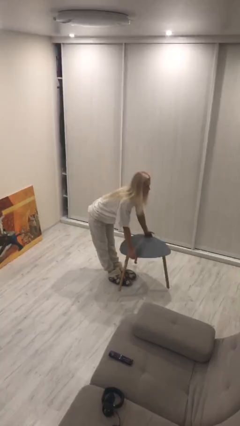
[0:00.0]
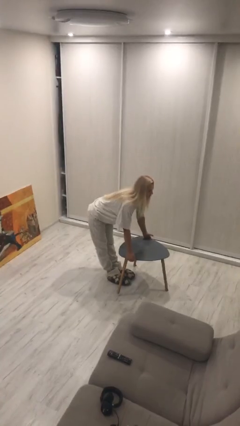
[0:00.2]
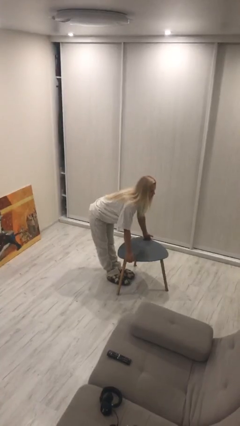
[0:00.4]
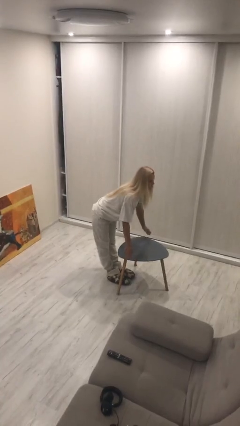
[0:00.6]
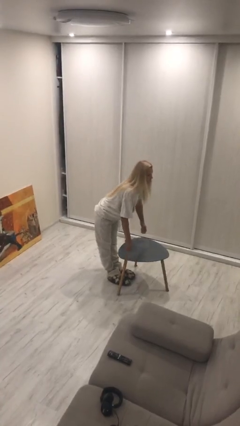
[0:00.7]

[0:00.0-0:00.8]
person puts down object on floor

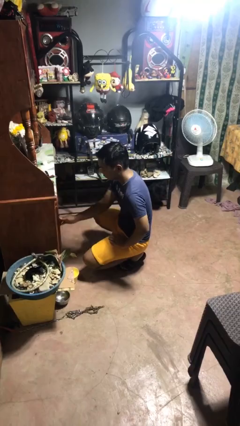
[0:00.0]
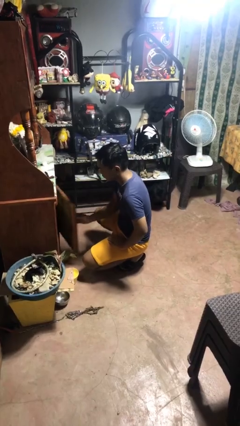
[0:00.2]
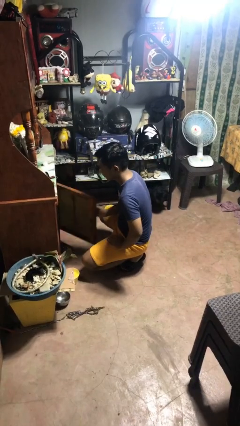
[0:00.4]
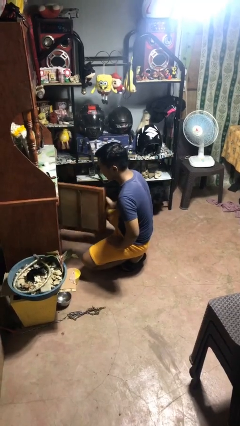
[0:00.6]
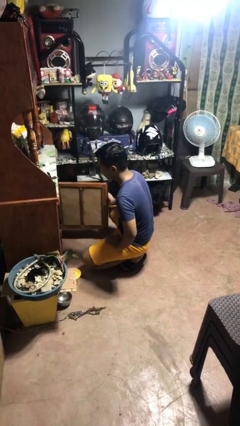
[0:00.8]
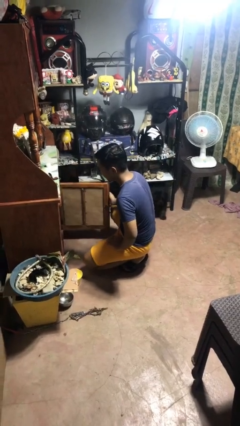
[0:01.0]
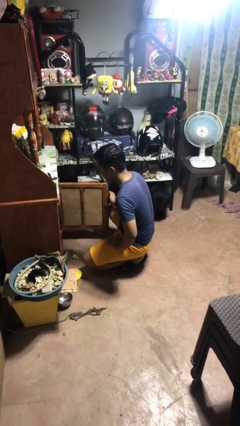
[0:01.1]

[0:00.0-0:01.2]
person opens cabinet

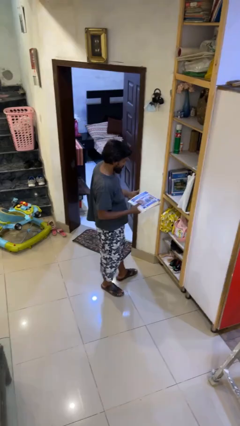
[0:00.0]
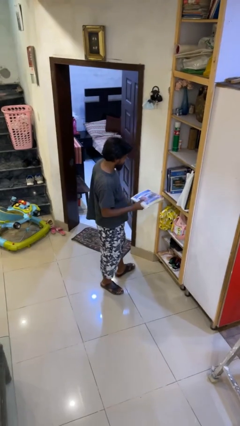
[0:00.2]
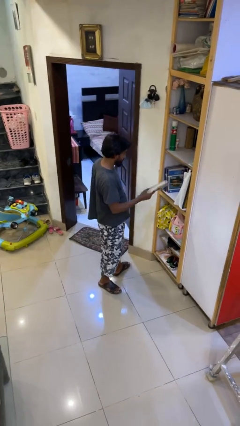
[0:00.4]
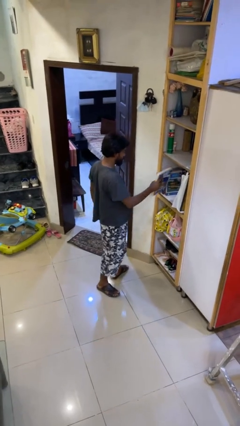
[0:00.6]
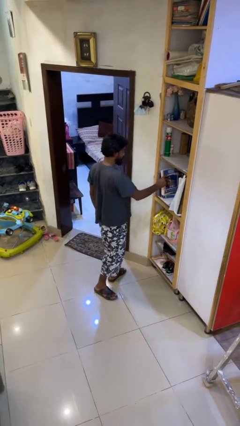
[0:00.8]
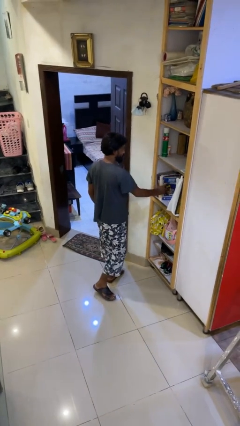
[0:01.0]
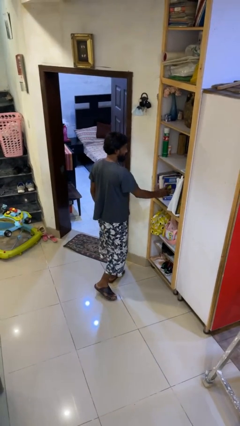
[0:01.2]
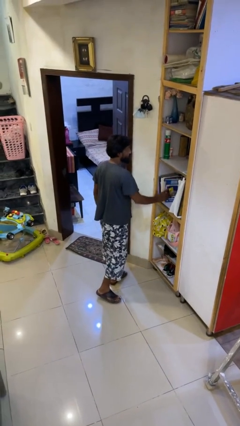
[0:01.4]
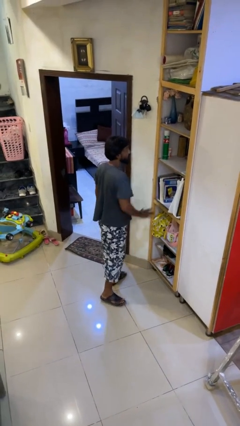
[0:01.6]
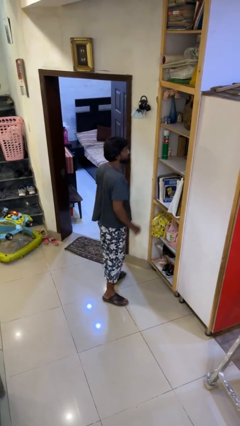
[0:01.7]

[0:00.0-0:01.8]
person puts down object into cabinet

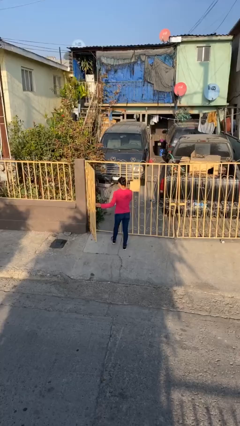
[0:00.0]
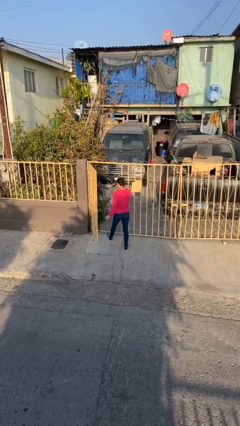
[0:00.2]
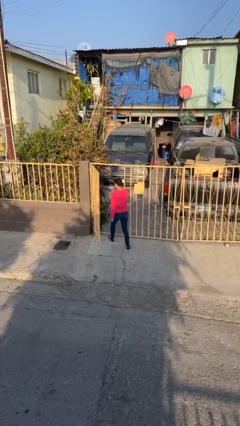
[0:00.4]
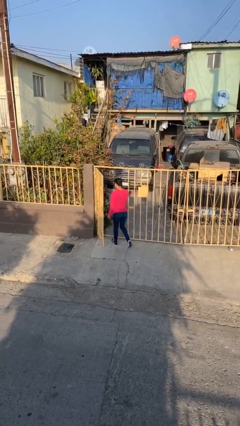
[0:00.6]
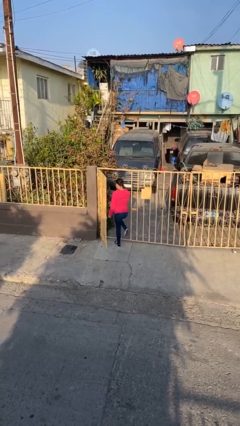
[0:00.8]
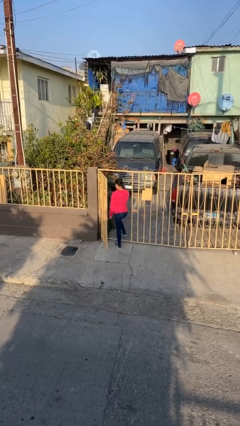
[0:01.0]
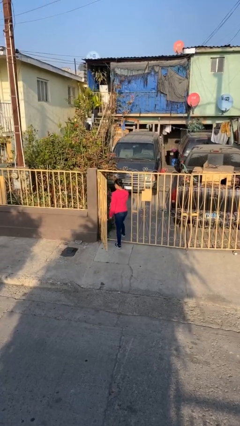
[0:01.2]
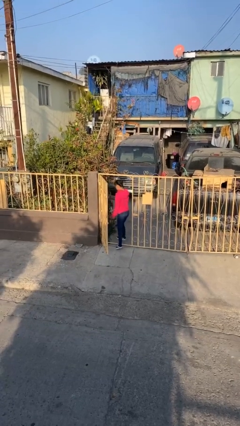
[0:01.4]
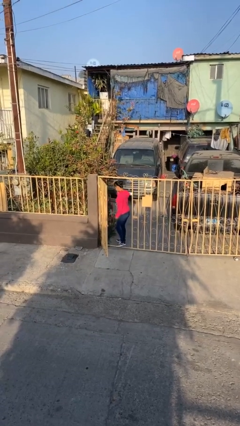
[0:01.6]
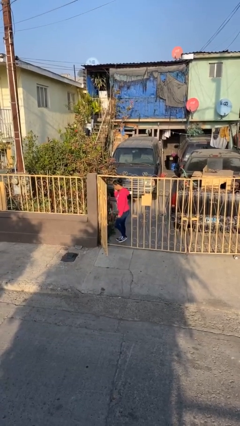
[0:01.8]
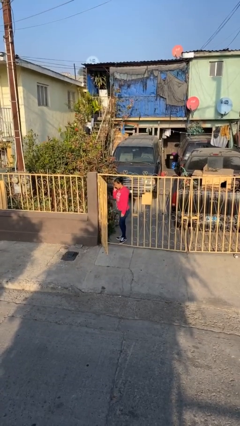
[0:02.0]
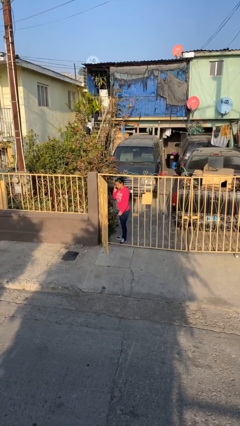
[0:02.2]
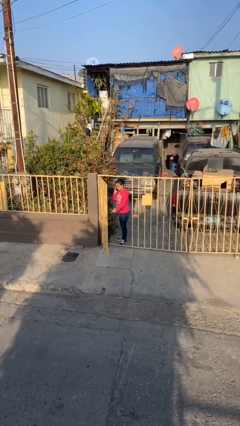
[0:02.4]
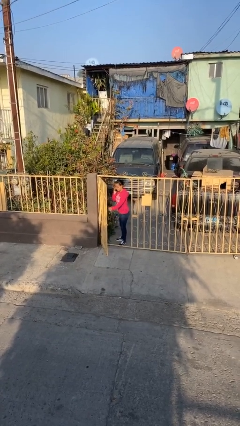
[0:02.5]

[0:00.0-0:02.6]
person exits scene through structure

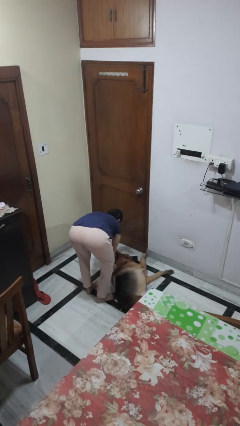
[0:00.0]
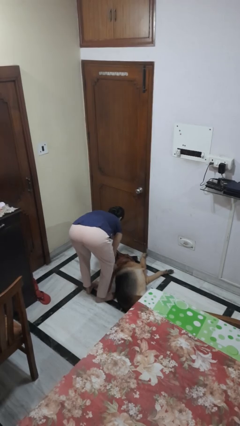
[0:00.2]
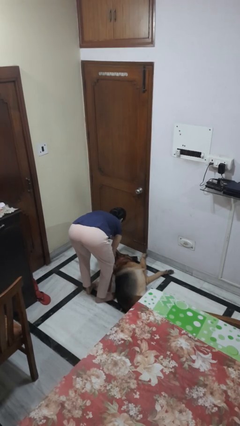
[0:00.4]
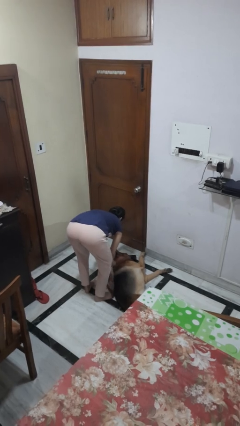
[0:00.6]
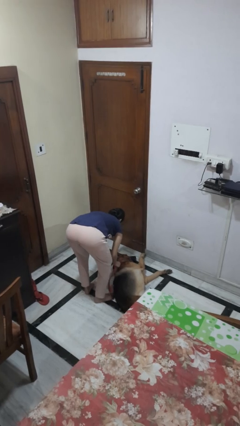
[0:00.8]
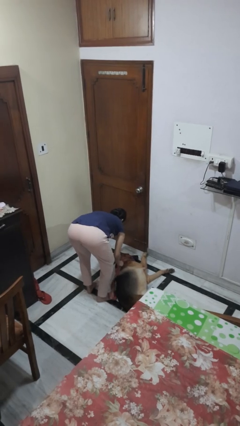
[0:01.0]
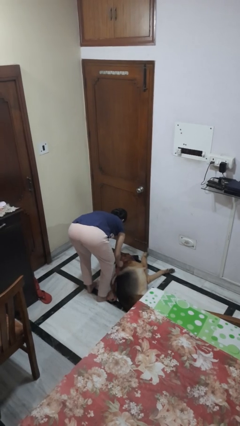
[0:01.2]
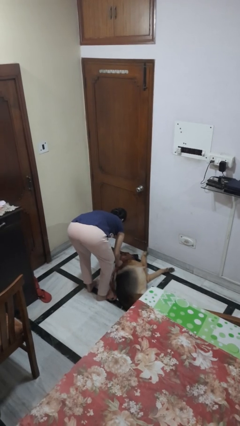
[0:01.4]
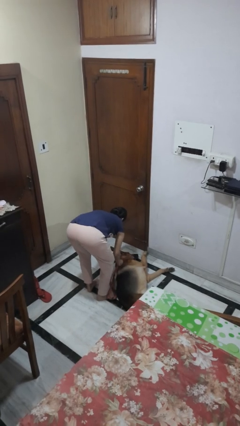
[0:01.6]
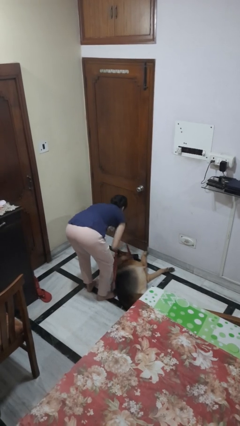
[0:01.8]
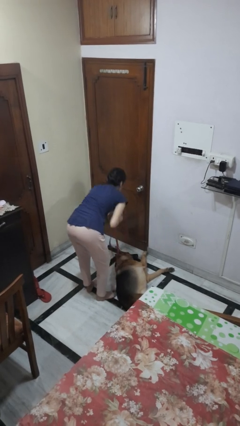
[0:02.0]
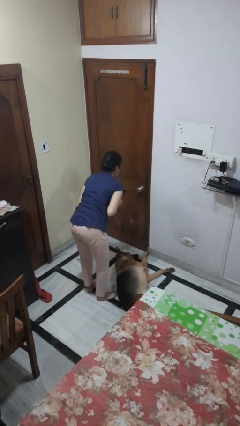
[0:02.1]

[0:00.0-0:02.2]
person unattaches leash from dog

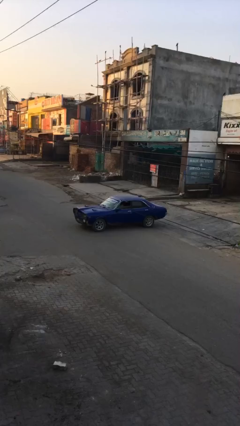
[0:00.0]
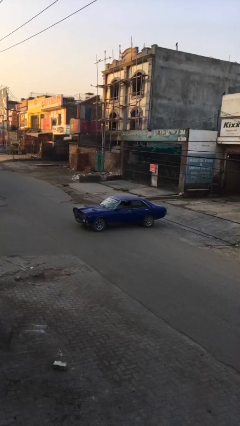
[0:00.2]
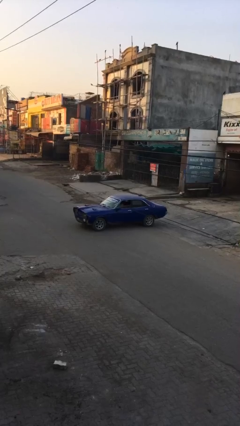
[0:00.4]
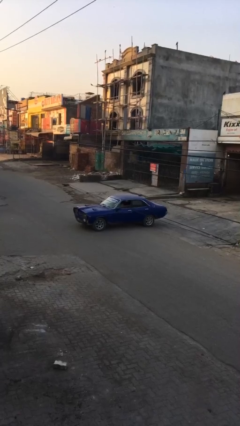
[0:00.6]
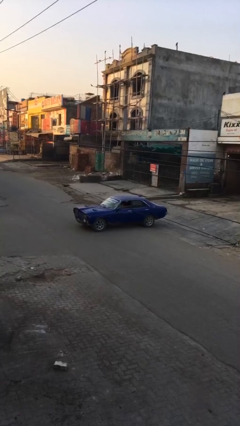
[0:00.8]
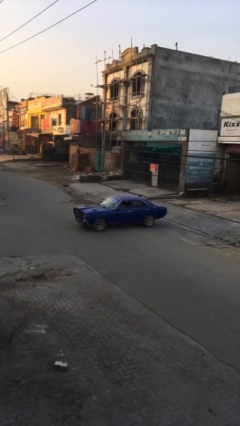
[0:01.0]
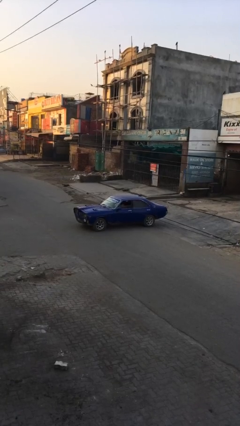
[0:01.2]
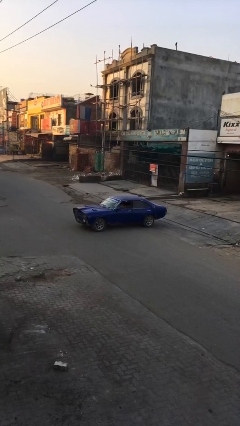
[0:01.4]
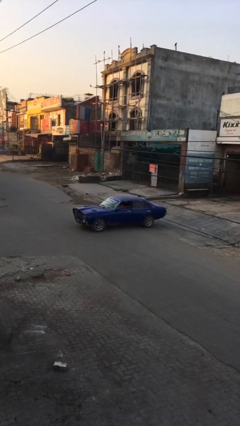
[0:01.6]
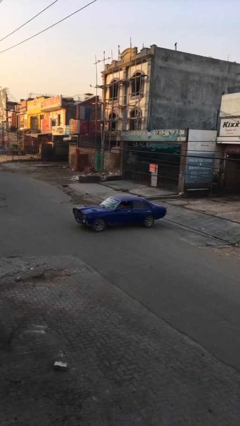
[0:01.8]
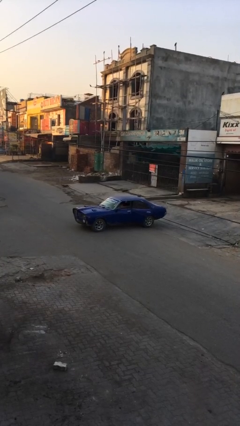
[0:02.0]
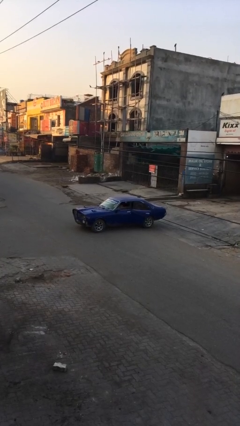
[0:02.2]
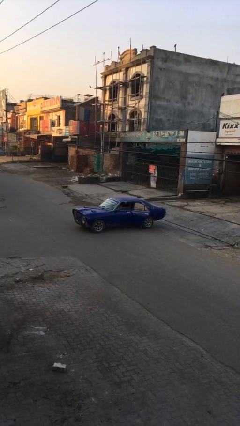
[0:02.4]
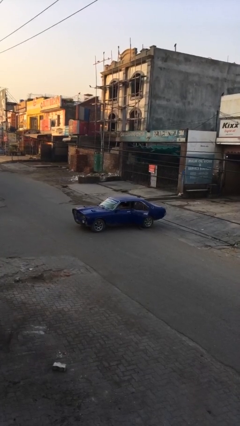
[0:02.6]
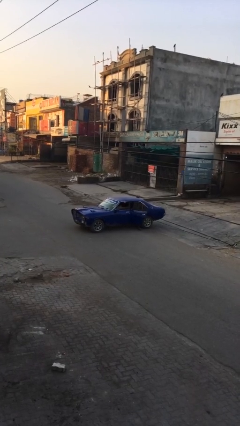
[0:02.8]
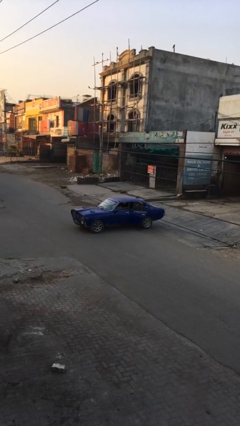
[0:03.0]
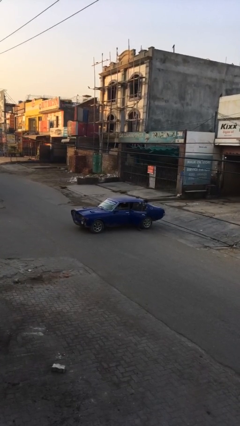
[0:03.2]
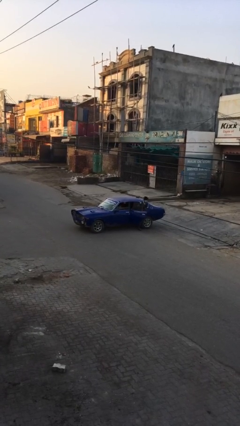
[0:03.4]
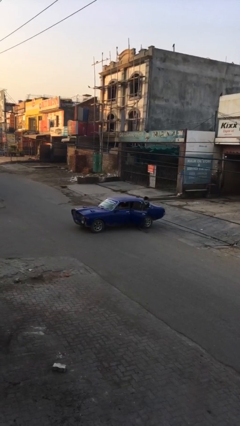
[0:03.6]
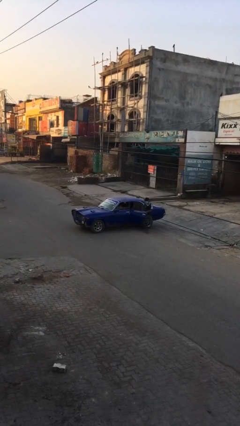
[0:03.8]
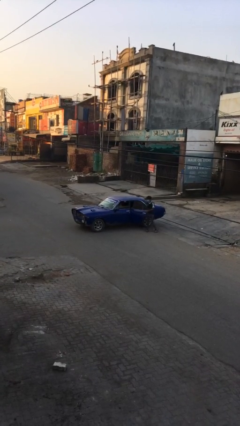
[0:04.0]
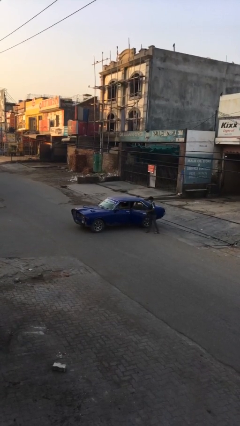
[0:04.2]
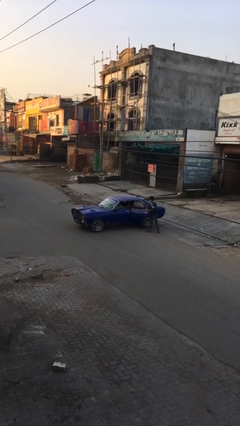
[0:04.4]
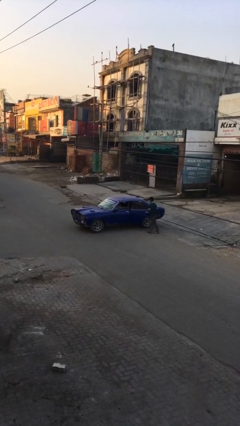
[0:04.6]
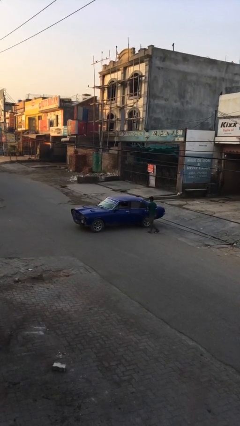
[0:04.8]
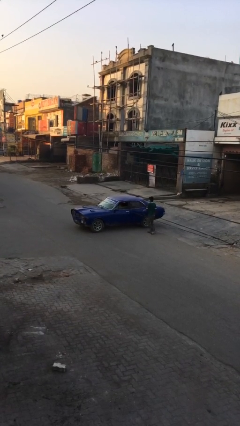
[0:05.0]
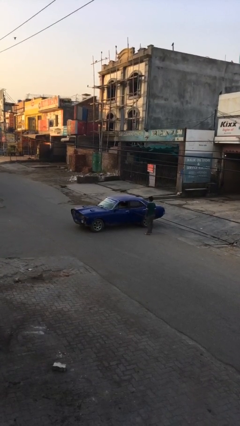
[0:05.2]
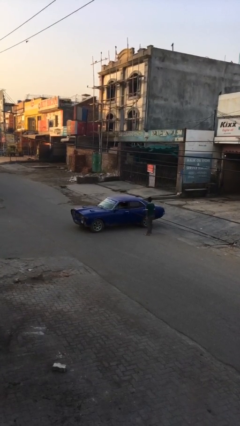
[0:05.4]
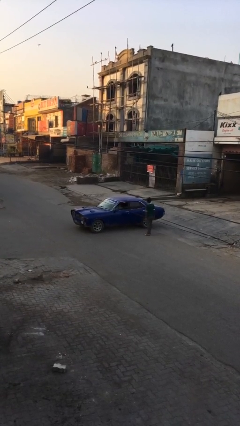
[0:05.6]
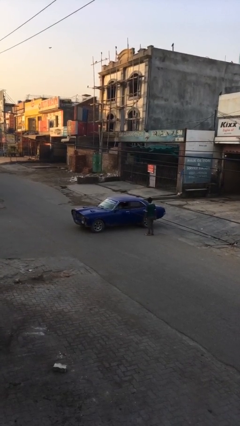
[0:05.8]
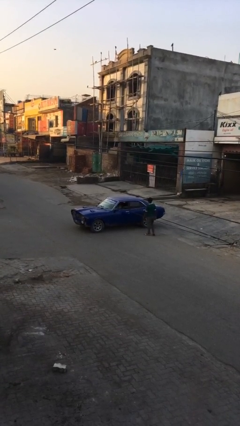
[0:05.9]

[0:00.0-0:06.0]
car drops off person

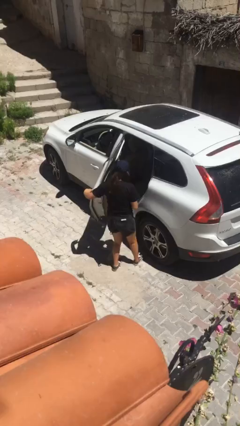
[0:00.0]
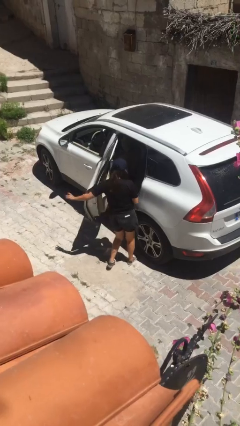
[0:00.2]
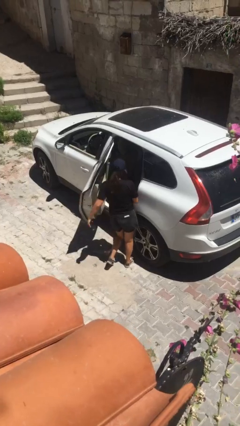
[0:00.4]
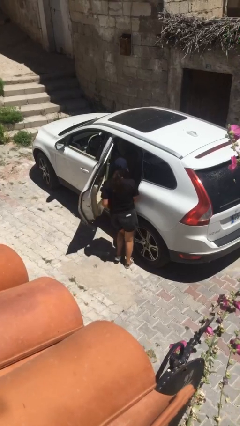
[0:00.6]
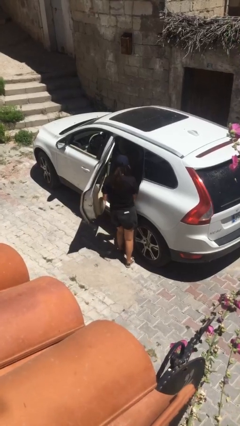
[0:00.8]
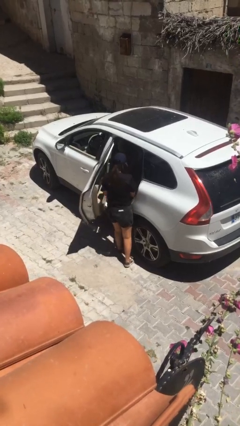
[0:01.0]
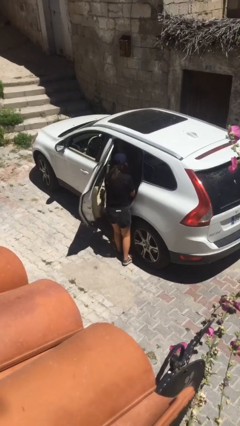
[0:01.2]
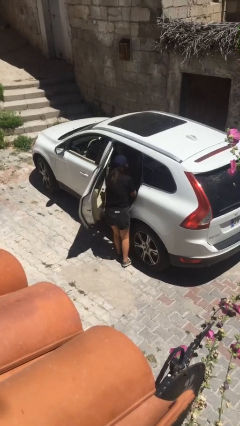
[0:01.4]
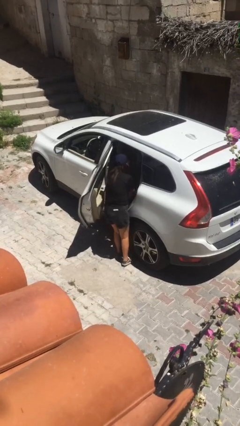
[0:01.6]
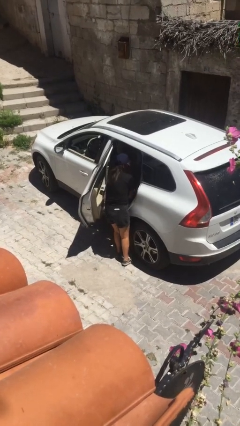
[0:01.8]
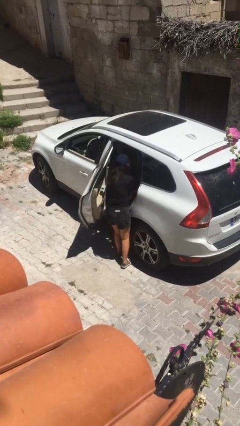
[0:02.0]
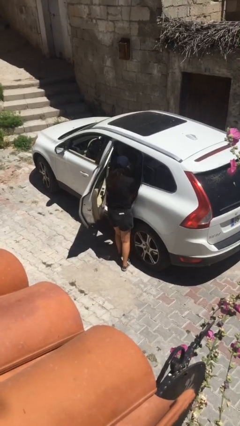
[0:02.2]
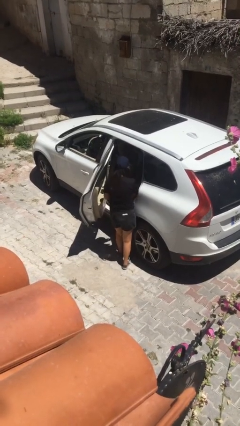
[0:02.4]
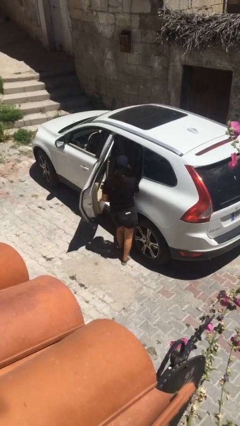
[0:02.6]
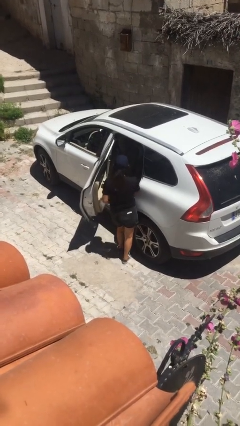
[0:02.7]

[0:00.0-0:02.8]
person loads car
